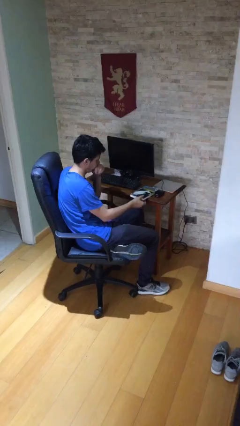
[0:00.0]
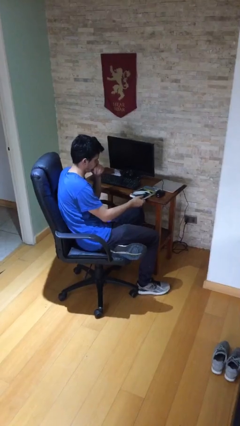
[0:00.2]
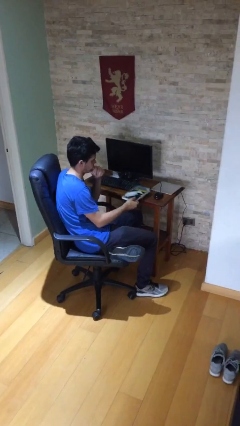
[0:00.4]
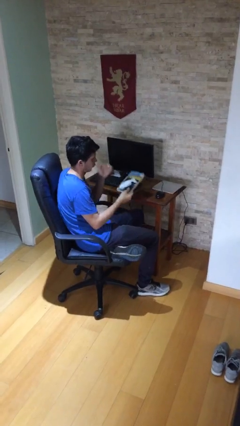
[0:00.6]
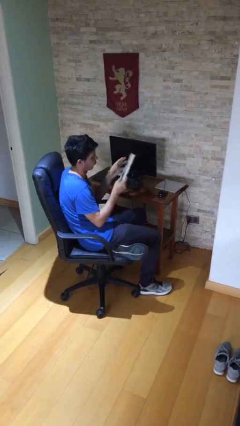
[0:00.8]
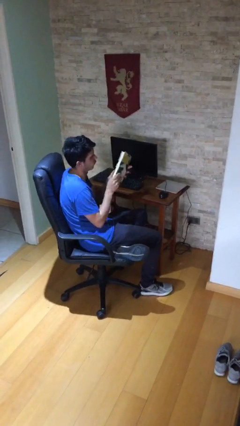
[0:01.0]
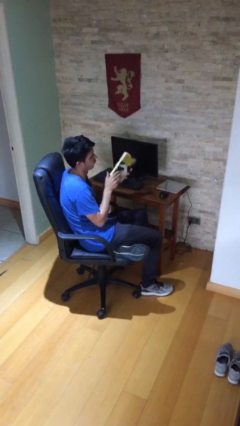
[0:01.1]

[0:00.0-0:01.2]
person picks up object from table

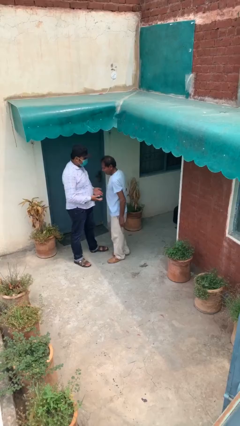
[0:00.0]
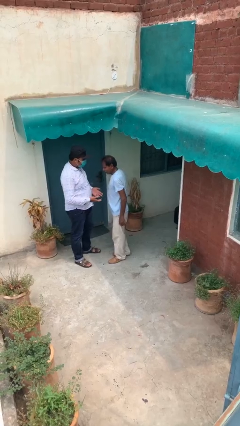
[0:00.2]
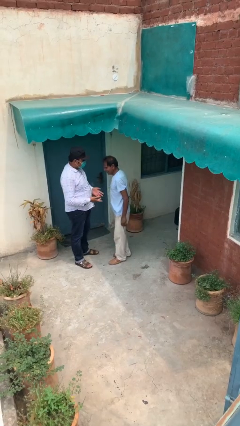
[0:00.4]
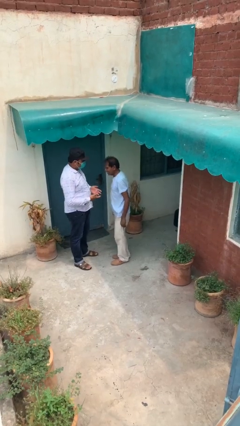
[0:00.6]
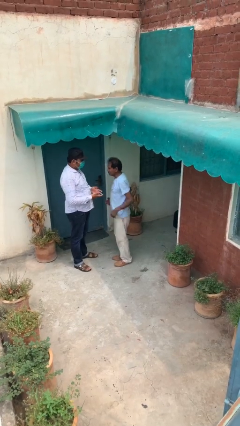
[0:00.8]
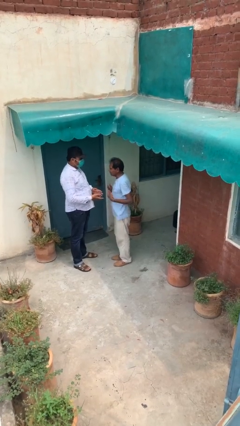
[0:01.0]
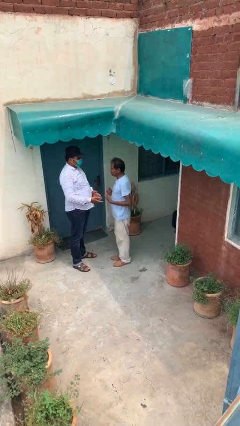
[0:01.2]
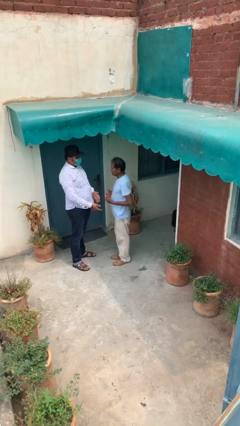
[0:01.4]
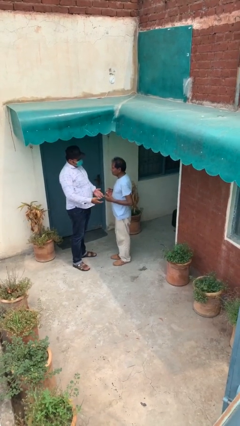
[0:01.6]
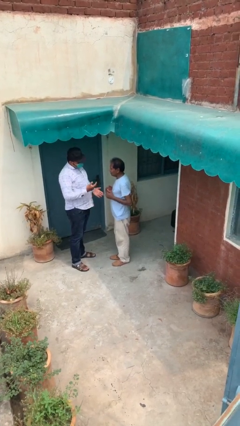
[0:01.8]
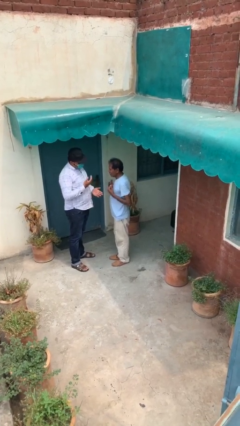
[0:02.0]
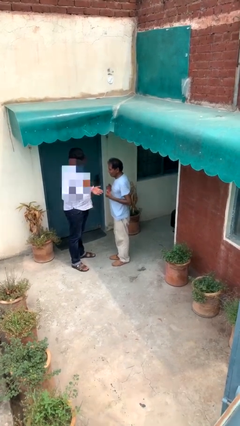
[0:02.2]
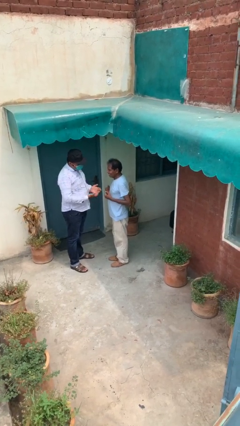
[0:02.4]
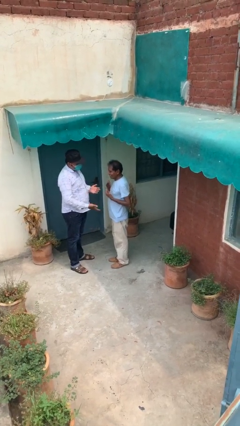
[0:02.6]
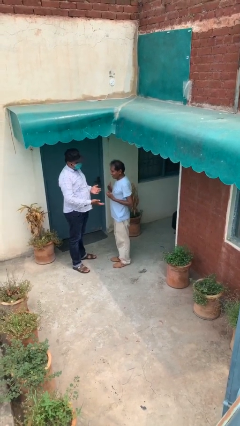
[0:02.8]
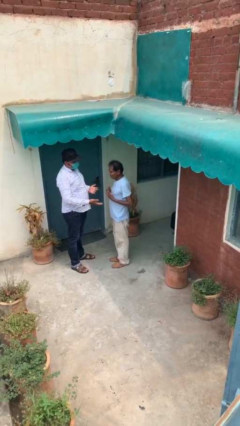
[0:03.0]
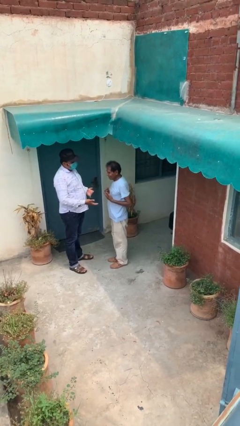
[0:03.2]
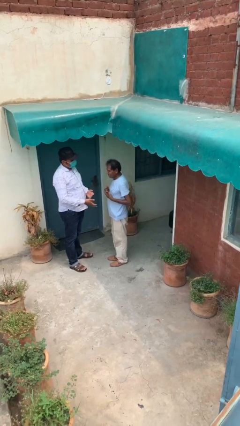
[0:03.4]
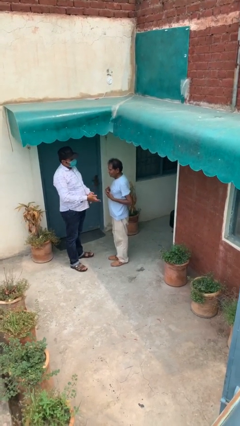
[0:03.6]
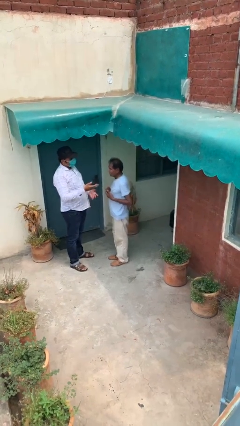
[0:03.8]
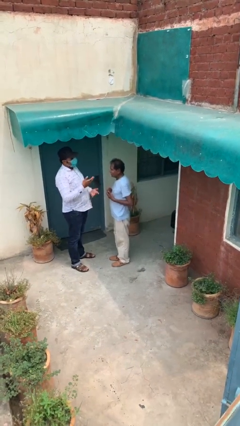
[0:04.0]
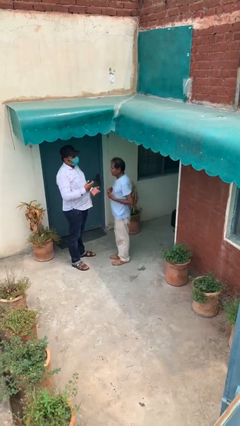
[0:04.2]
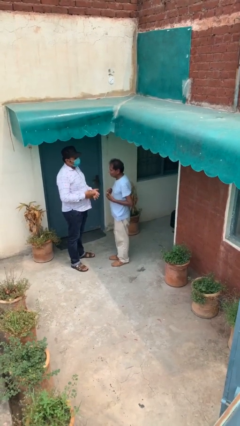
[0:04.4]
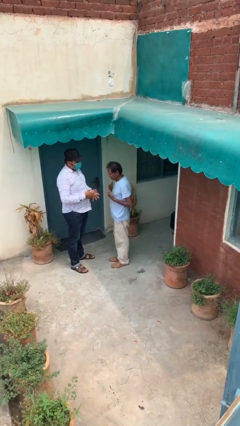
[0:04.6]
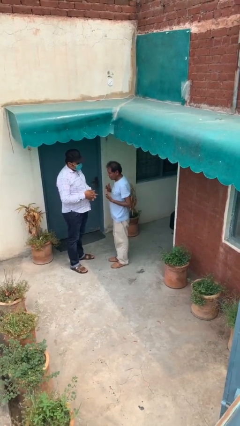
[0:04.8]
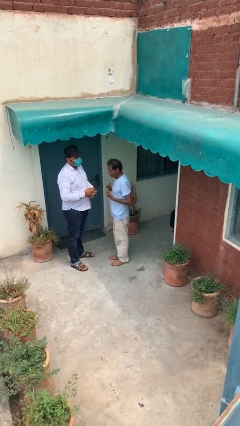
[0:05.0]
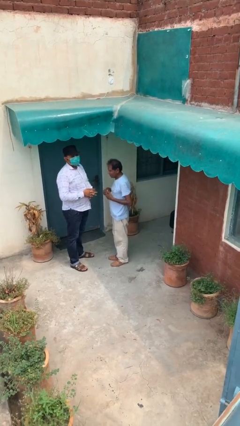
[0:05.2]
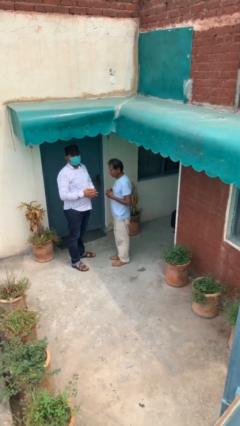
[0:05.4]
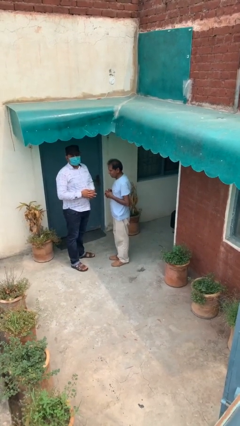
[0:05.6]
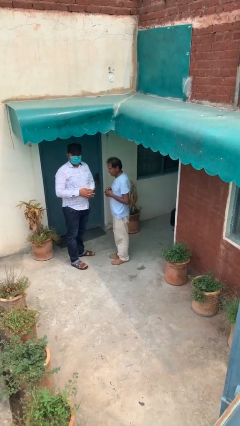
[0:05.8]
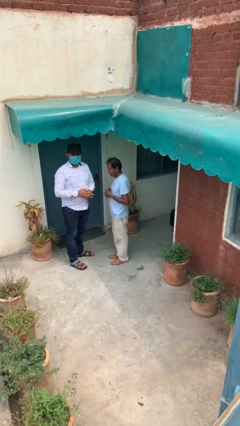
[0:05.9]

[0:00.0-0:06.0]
person talks to person

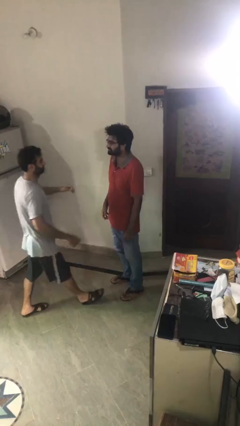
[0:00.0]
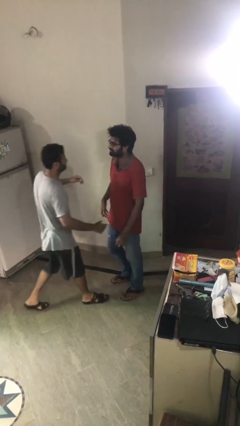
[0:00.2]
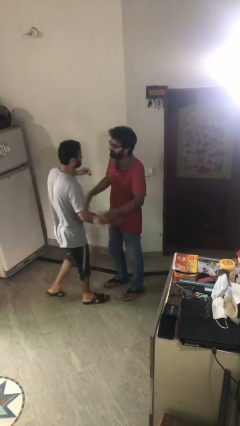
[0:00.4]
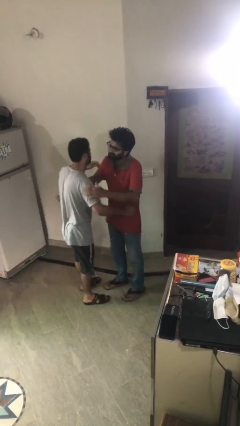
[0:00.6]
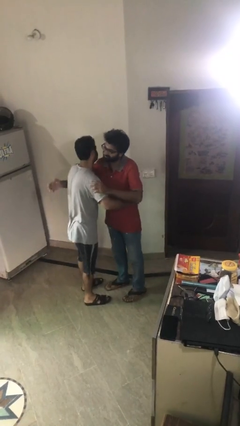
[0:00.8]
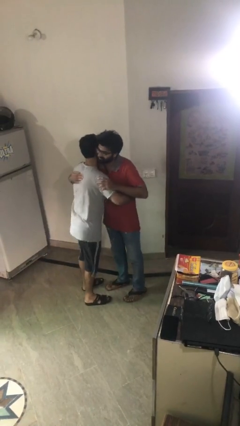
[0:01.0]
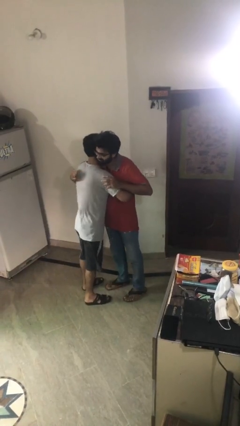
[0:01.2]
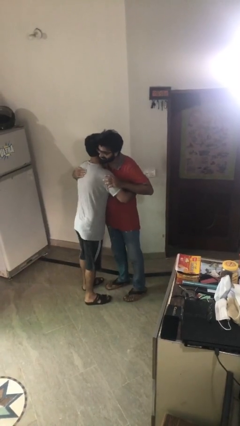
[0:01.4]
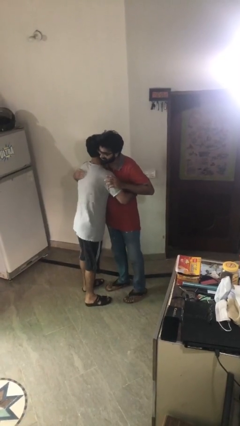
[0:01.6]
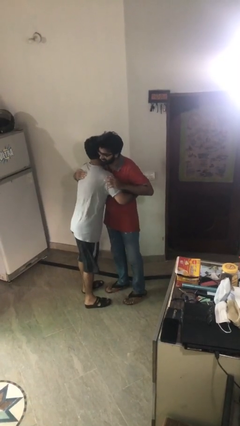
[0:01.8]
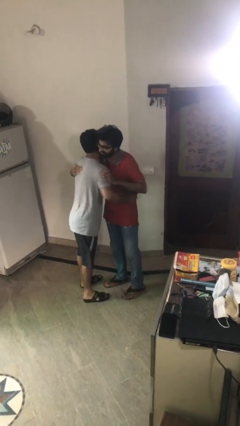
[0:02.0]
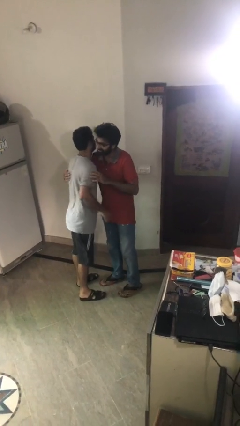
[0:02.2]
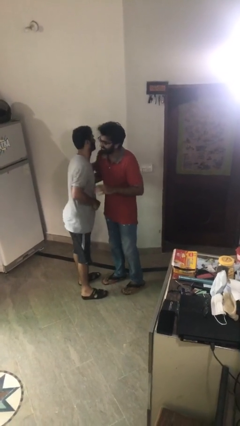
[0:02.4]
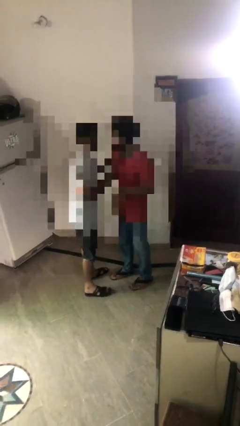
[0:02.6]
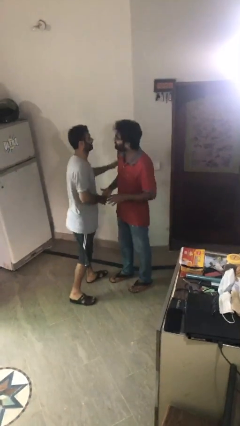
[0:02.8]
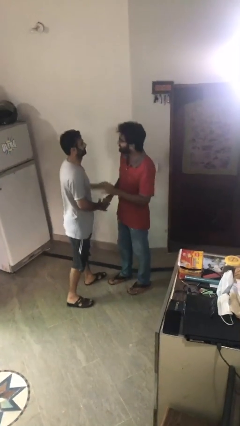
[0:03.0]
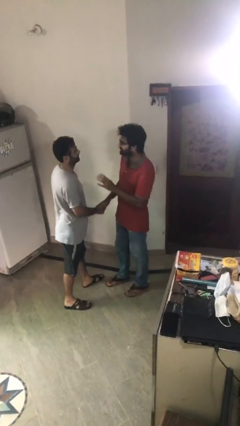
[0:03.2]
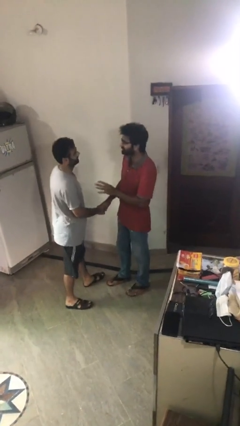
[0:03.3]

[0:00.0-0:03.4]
person embraces person

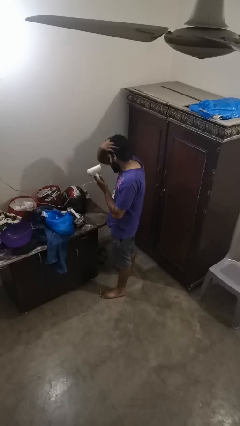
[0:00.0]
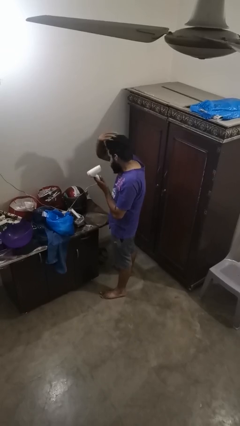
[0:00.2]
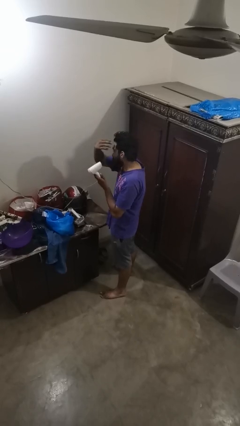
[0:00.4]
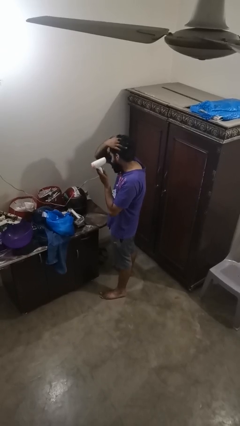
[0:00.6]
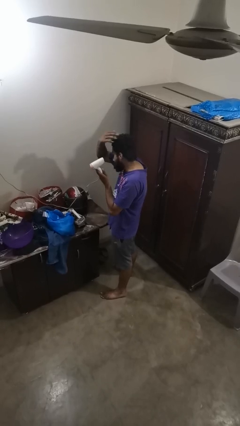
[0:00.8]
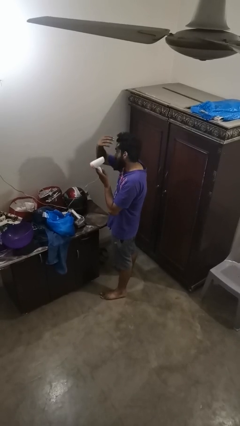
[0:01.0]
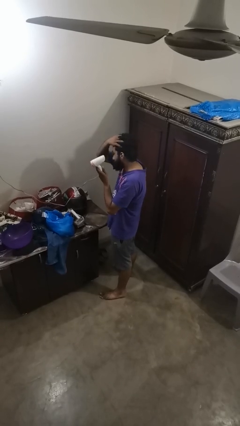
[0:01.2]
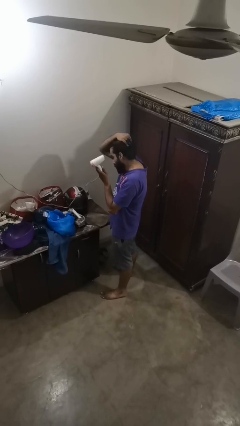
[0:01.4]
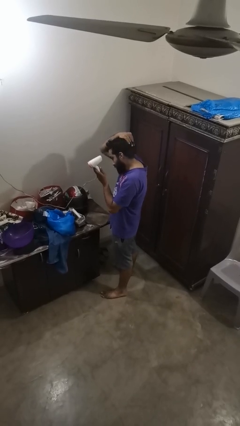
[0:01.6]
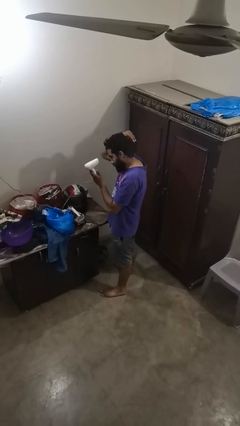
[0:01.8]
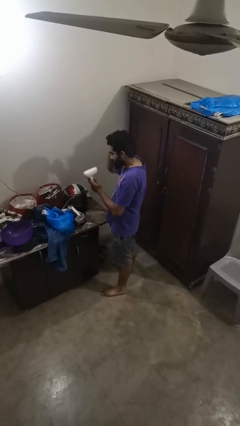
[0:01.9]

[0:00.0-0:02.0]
person dries hair with hairdryer

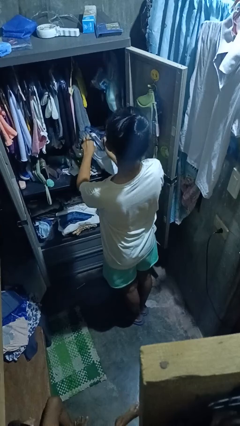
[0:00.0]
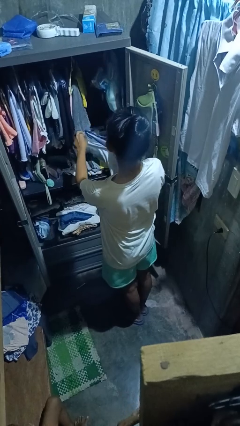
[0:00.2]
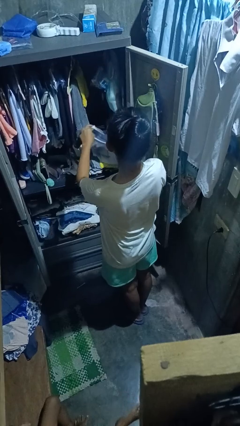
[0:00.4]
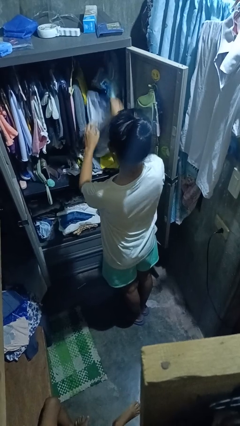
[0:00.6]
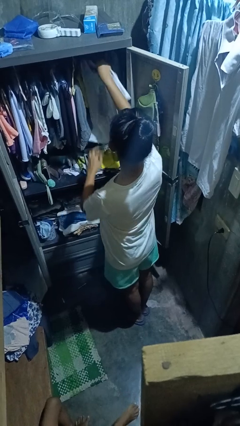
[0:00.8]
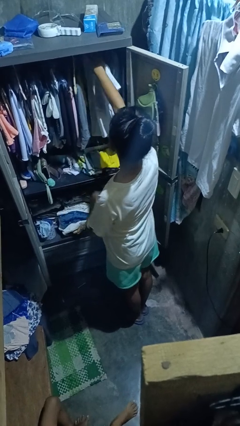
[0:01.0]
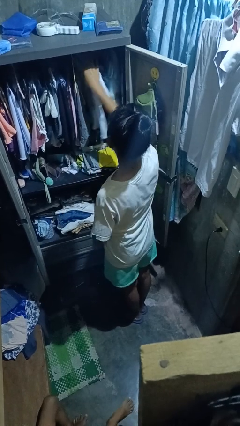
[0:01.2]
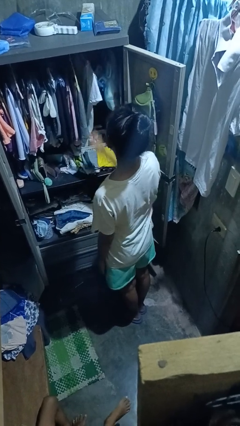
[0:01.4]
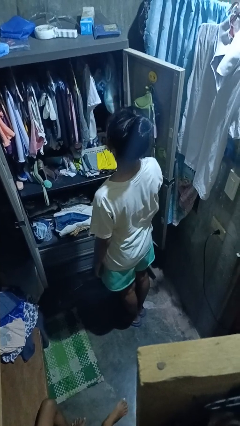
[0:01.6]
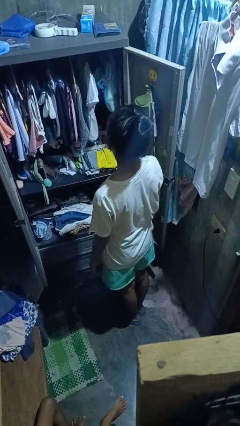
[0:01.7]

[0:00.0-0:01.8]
person puts clothes into closet

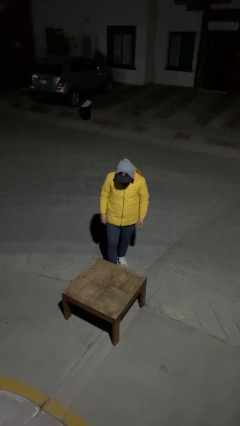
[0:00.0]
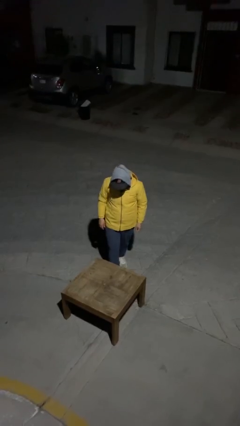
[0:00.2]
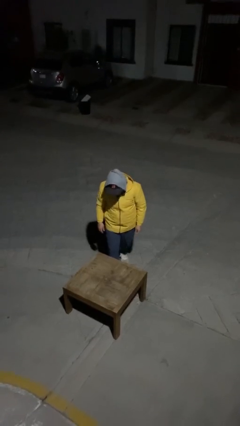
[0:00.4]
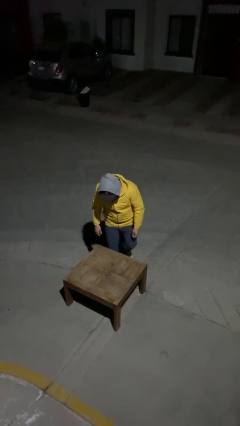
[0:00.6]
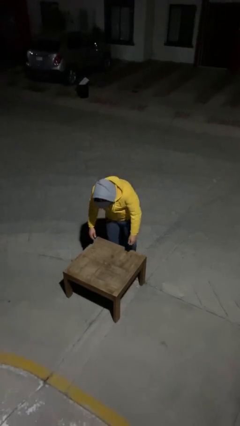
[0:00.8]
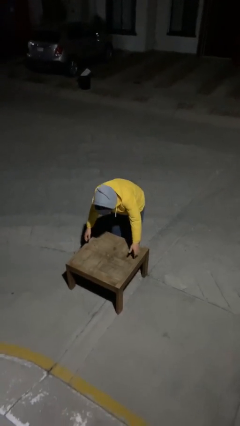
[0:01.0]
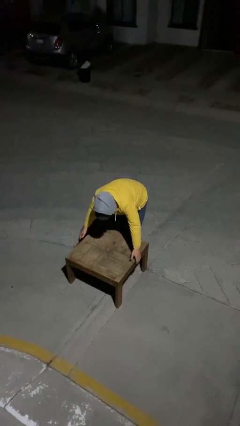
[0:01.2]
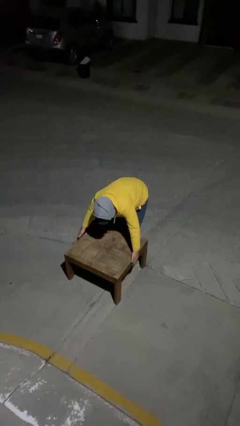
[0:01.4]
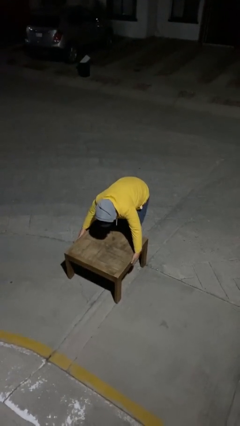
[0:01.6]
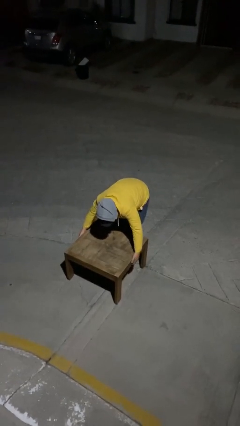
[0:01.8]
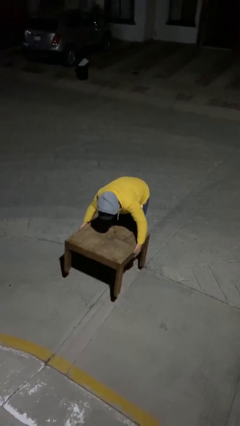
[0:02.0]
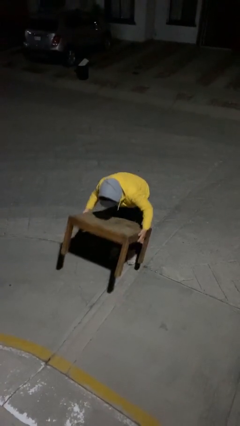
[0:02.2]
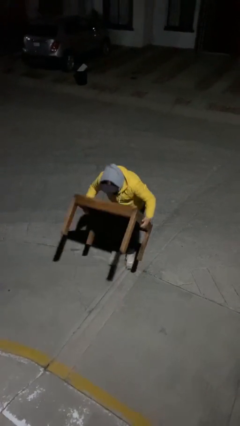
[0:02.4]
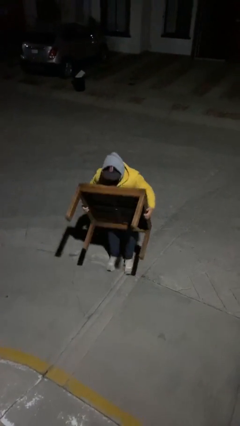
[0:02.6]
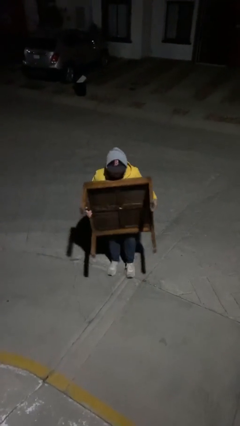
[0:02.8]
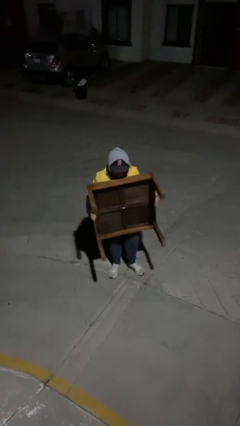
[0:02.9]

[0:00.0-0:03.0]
person picks up object from floor

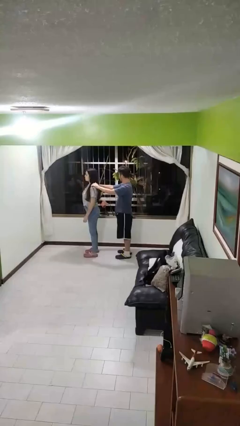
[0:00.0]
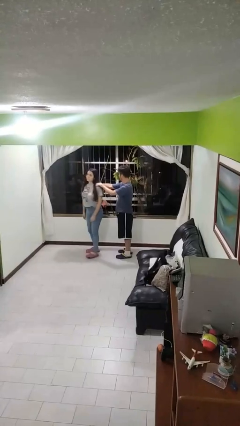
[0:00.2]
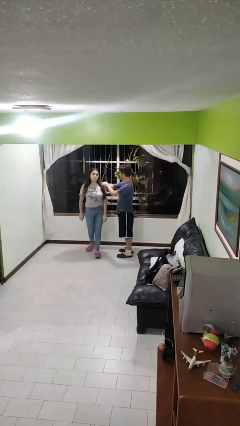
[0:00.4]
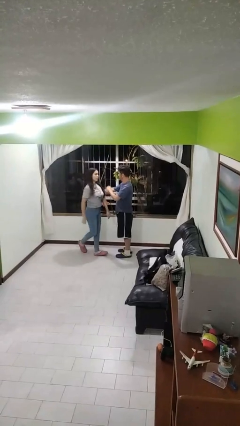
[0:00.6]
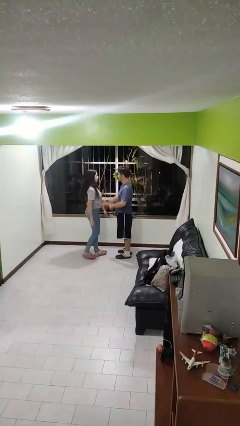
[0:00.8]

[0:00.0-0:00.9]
person spins person around
